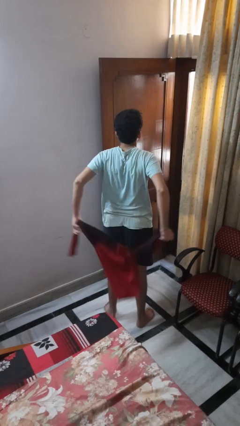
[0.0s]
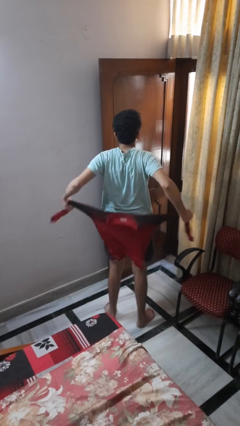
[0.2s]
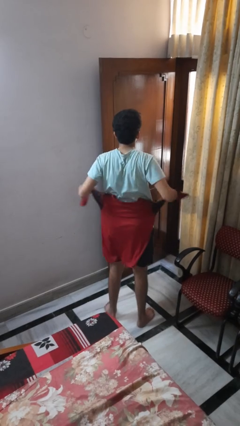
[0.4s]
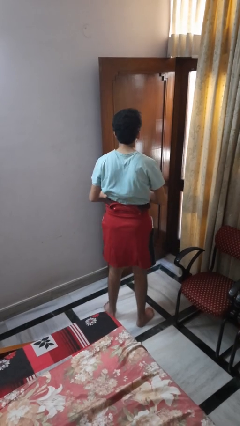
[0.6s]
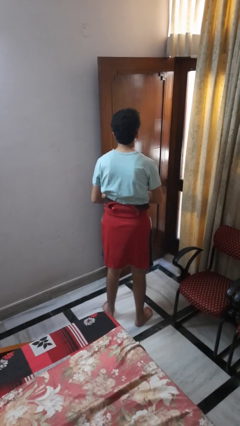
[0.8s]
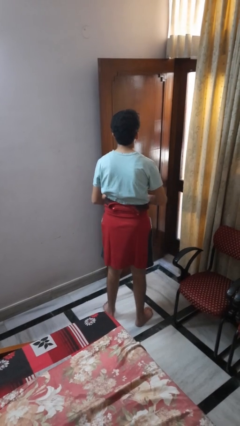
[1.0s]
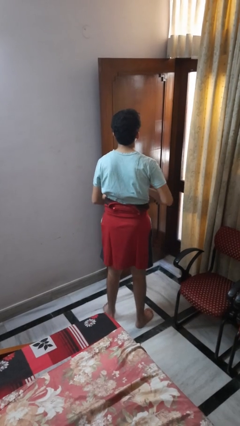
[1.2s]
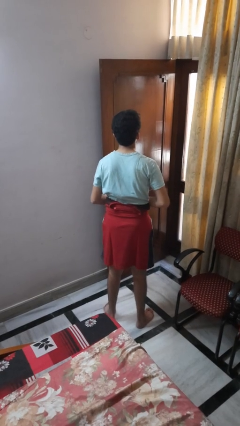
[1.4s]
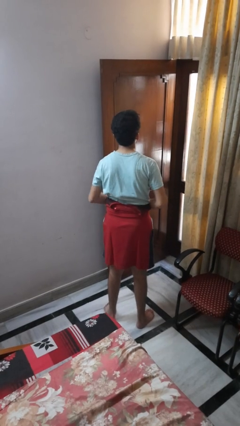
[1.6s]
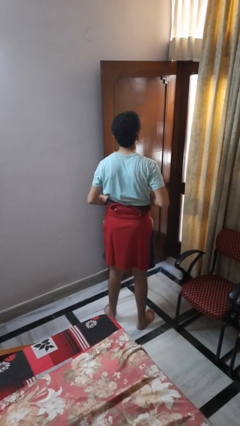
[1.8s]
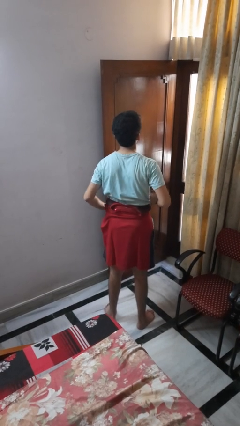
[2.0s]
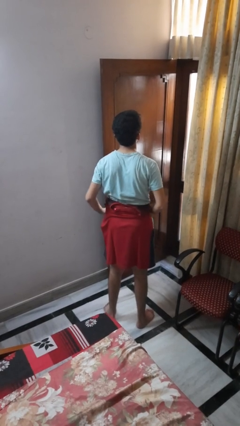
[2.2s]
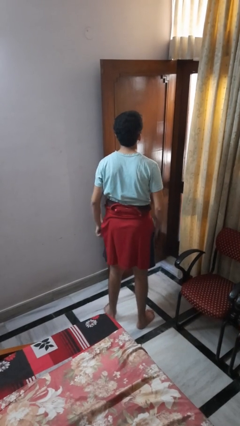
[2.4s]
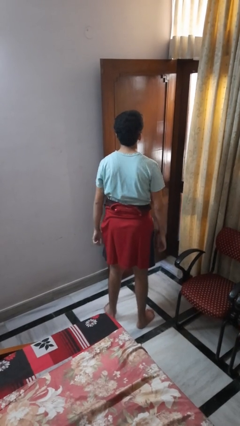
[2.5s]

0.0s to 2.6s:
person ties jacket around waist

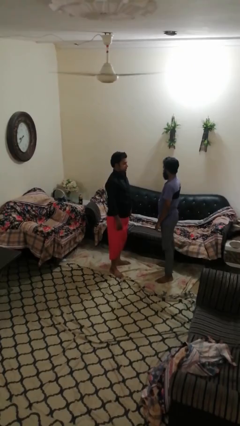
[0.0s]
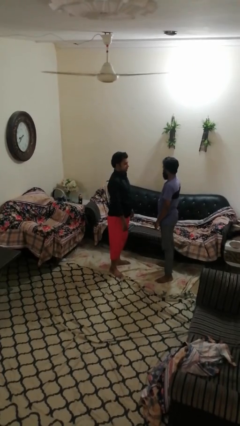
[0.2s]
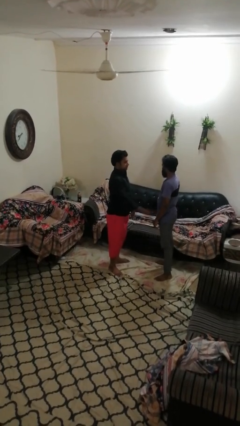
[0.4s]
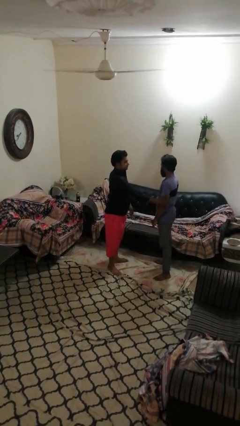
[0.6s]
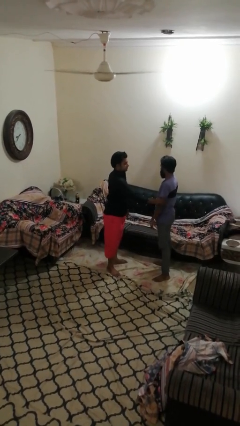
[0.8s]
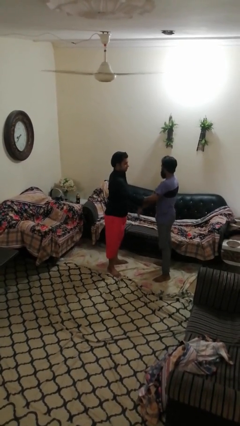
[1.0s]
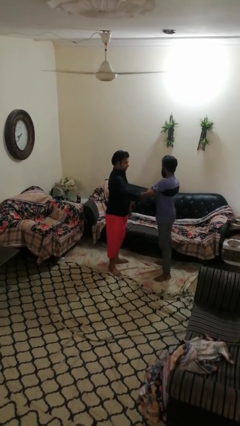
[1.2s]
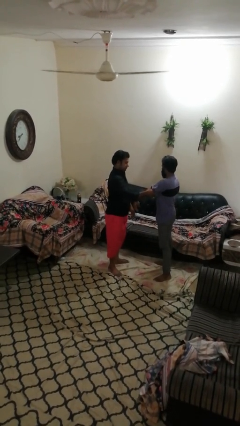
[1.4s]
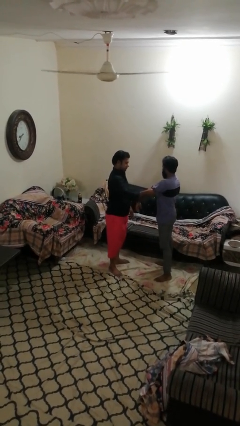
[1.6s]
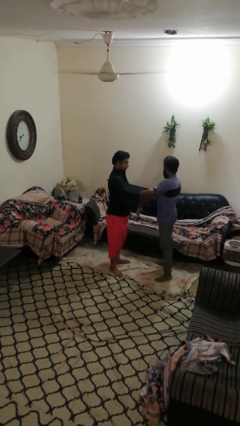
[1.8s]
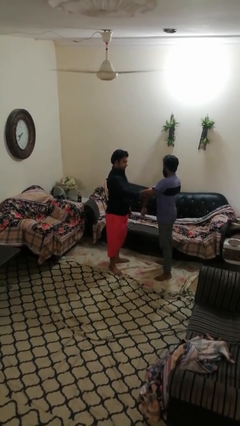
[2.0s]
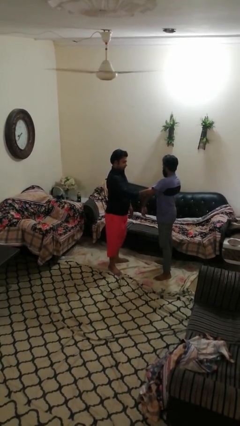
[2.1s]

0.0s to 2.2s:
person grabs person by bicep

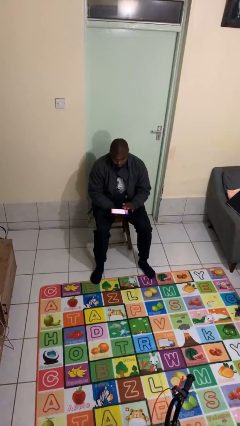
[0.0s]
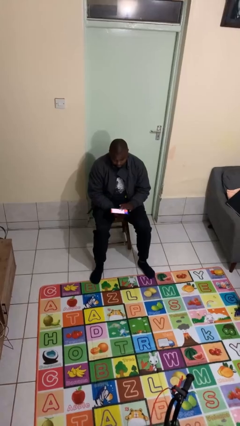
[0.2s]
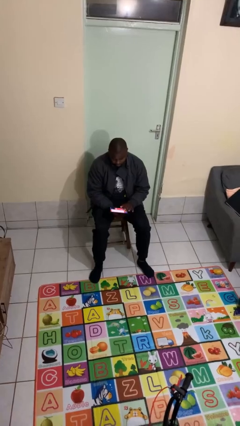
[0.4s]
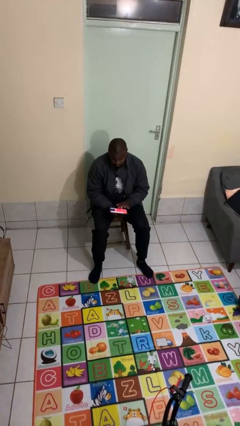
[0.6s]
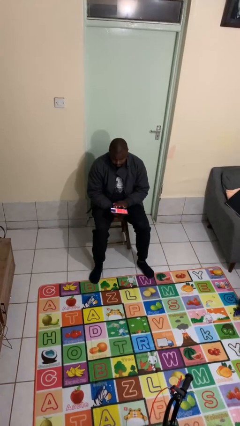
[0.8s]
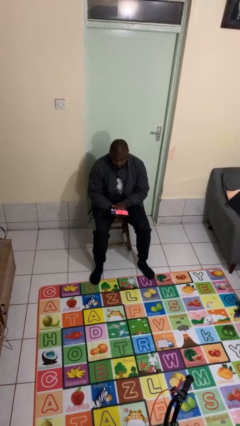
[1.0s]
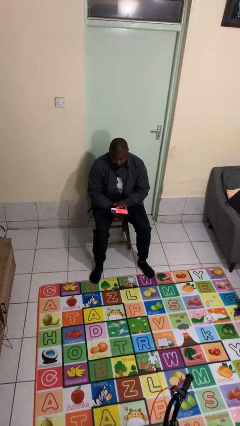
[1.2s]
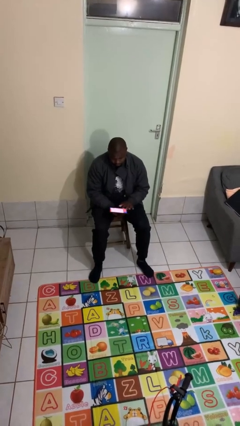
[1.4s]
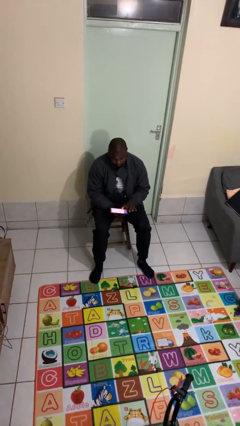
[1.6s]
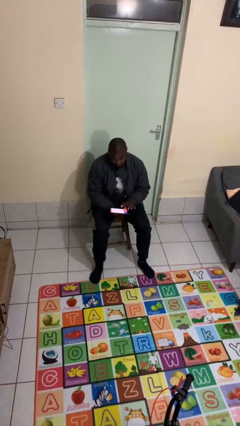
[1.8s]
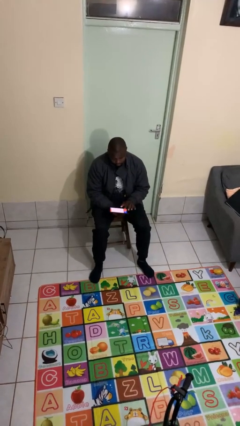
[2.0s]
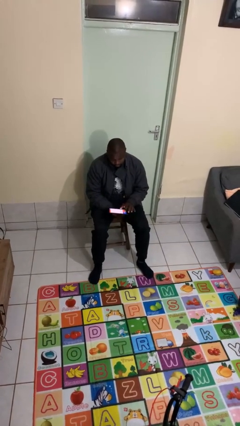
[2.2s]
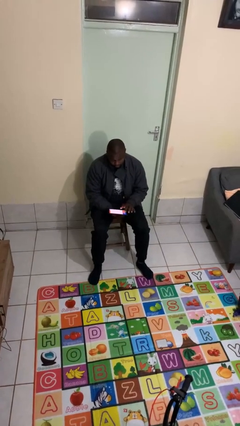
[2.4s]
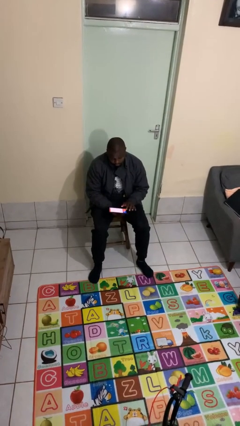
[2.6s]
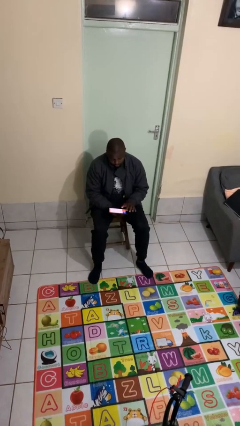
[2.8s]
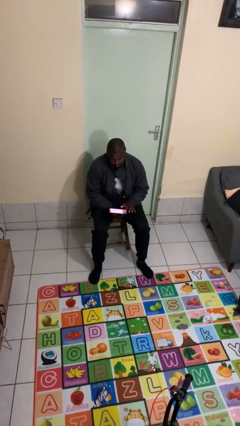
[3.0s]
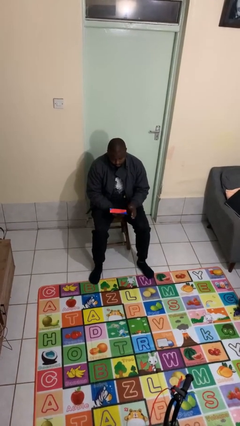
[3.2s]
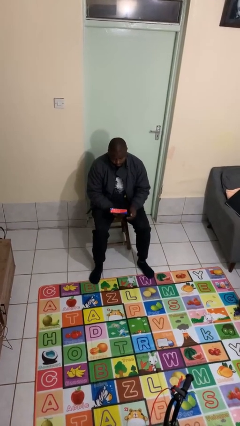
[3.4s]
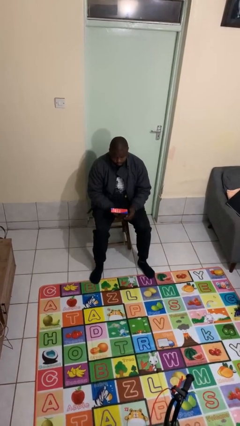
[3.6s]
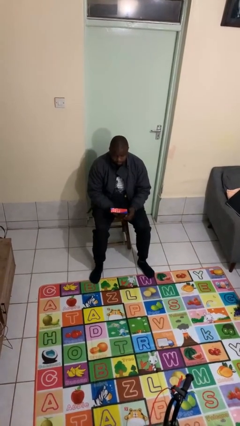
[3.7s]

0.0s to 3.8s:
person interacts with tablet

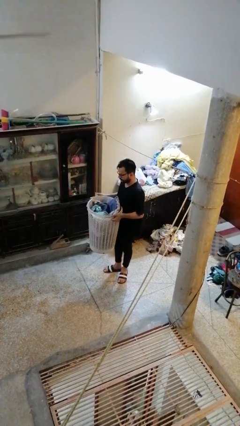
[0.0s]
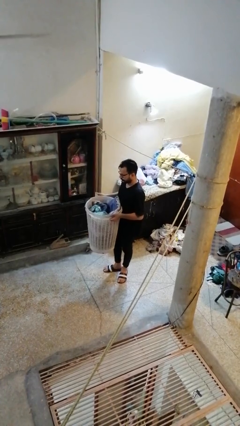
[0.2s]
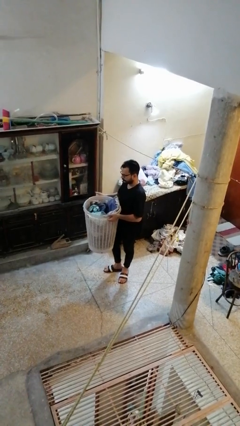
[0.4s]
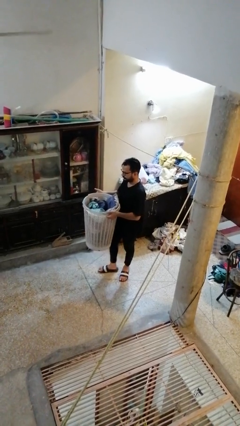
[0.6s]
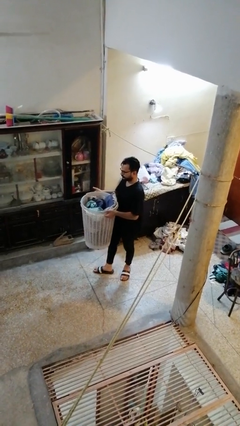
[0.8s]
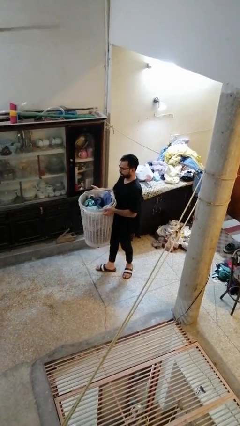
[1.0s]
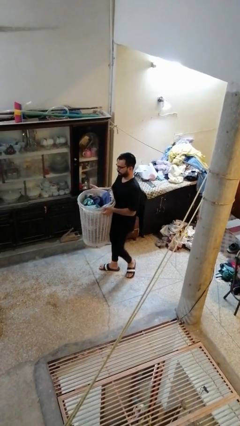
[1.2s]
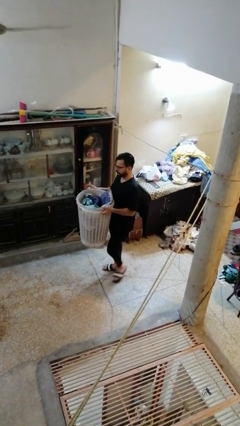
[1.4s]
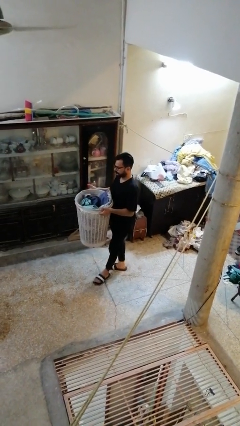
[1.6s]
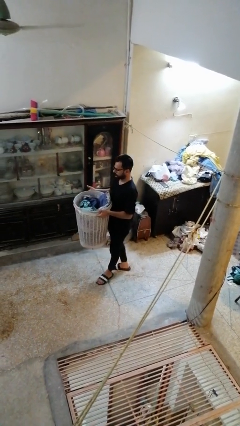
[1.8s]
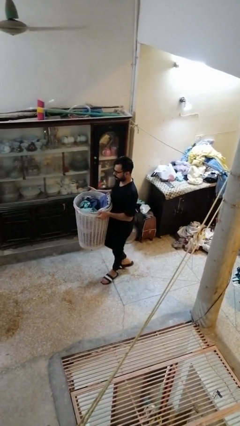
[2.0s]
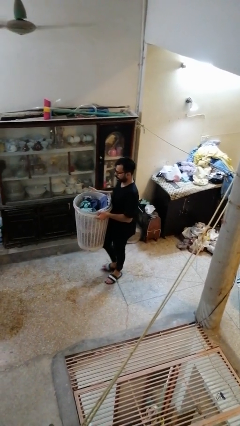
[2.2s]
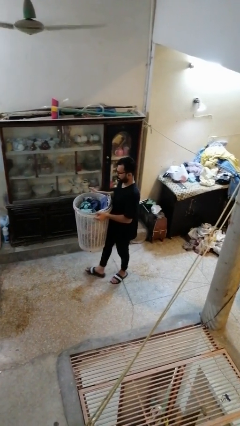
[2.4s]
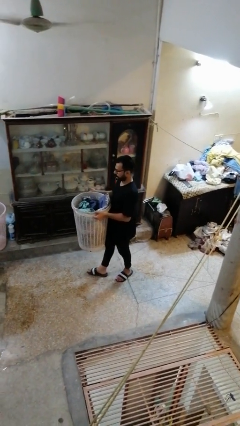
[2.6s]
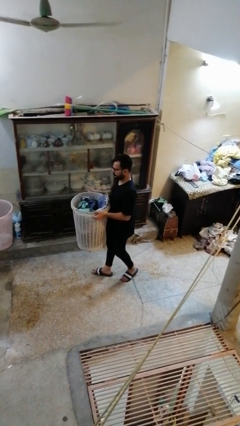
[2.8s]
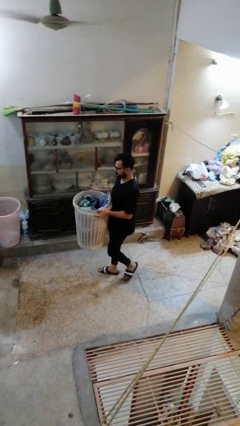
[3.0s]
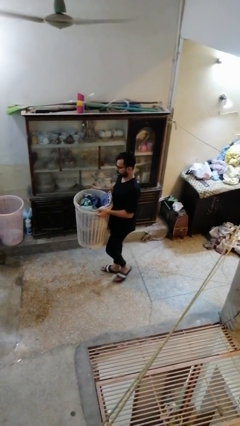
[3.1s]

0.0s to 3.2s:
person carries laundry basket

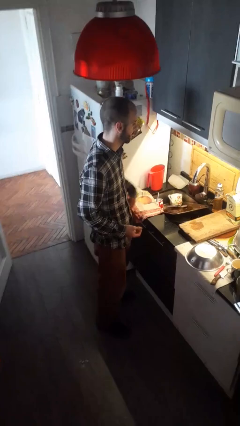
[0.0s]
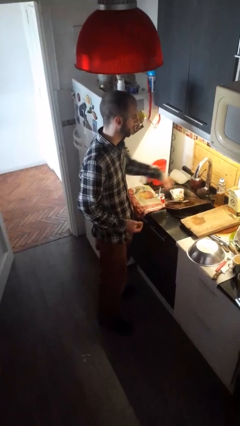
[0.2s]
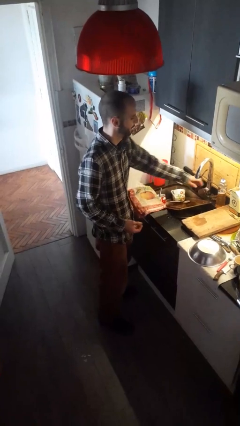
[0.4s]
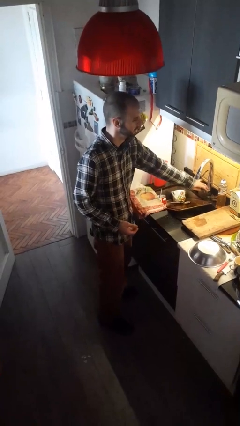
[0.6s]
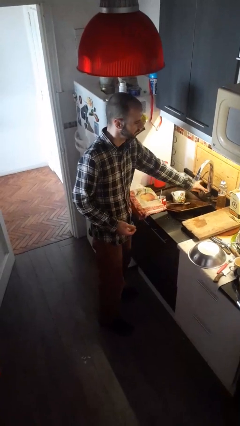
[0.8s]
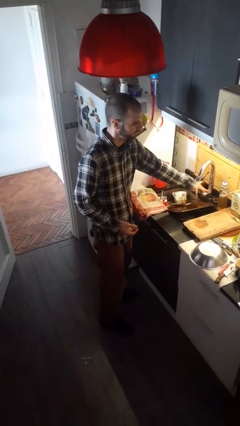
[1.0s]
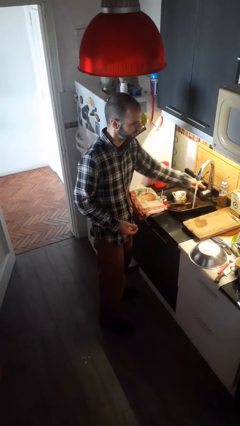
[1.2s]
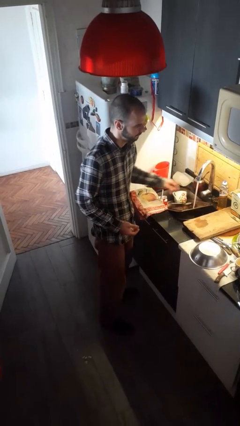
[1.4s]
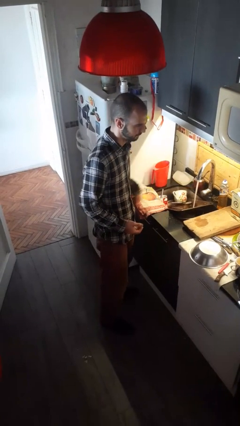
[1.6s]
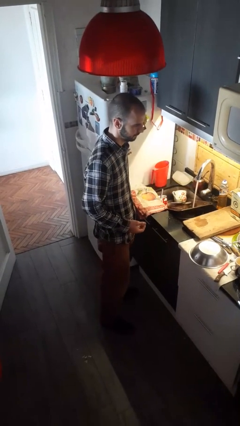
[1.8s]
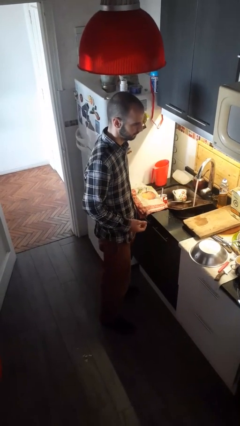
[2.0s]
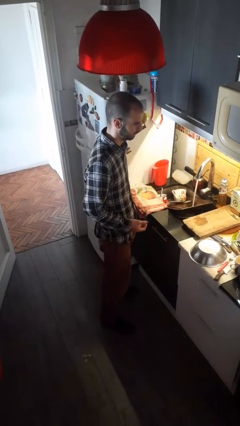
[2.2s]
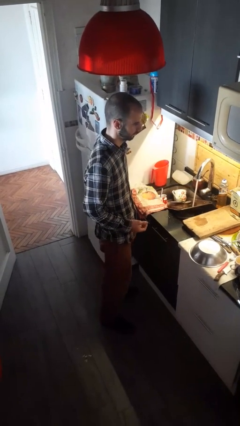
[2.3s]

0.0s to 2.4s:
person turns on faucet

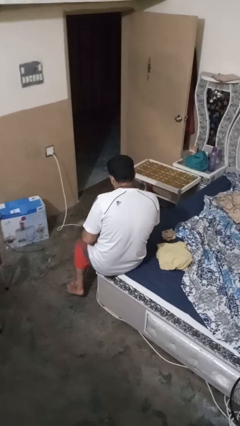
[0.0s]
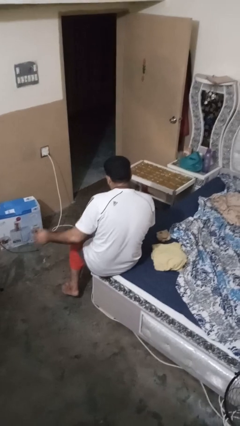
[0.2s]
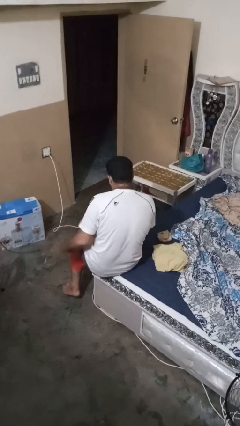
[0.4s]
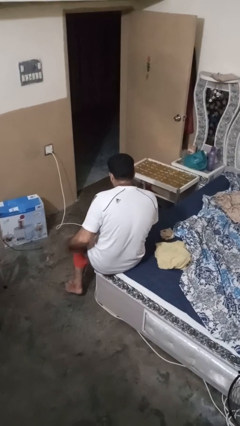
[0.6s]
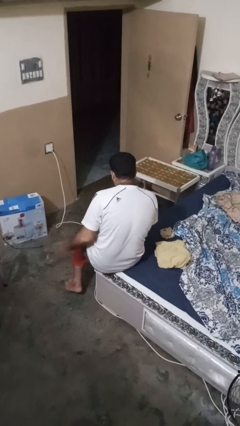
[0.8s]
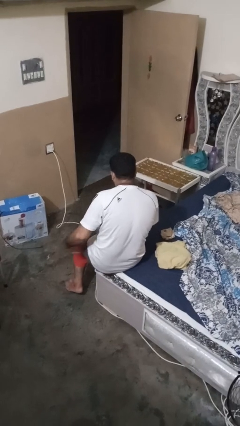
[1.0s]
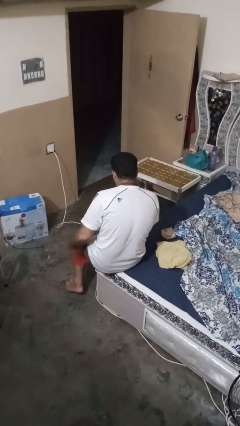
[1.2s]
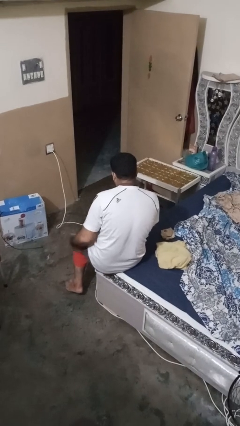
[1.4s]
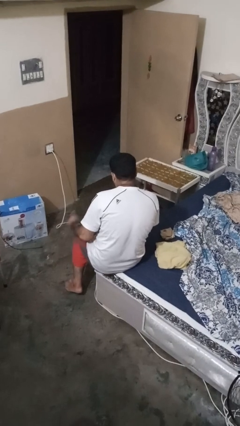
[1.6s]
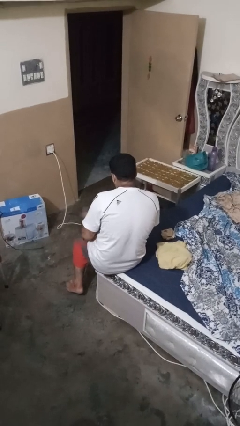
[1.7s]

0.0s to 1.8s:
person slaps hands on thighs

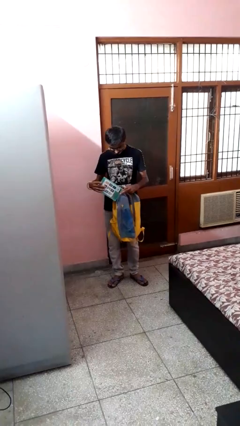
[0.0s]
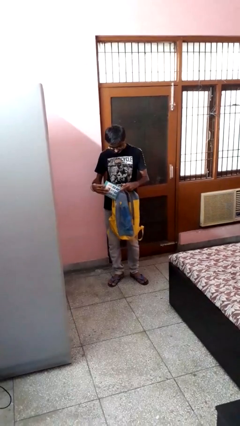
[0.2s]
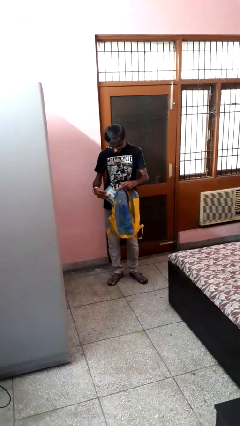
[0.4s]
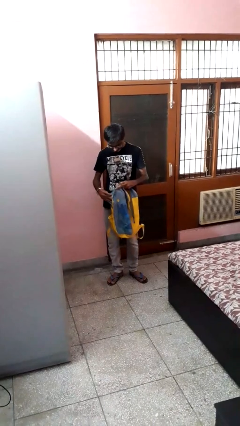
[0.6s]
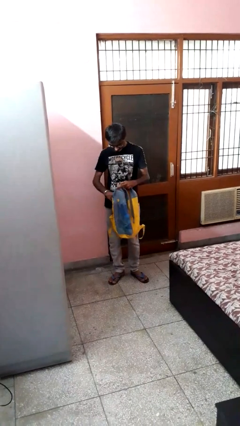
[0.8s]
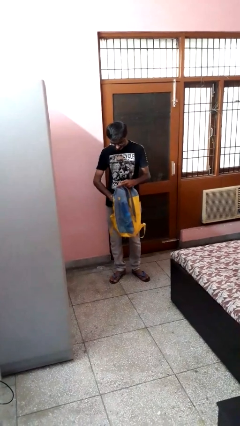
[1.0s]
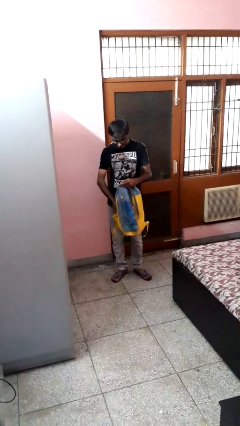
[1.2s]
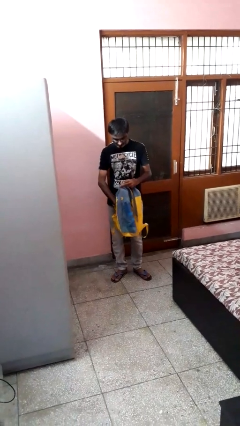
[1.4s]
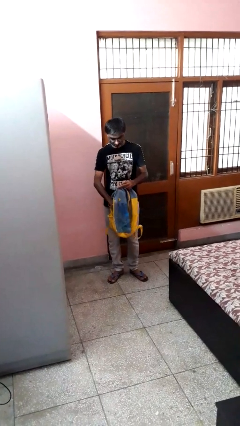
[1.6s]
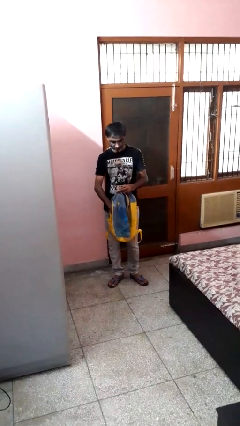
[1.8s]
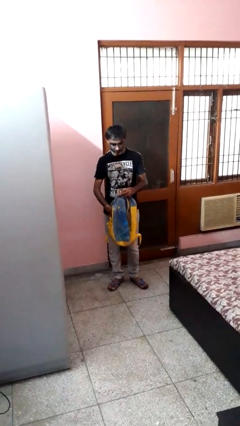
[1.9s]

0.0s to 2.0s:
person puts object into backpack
